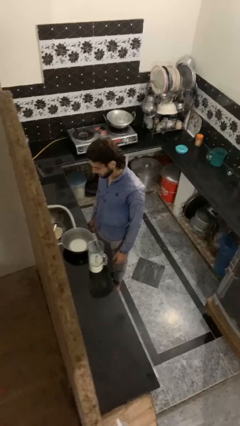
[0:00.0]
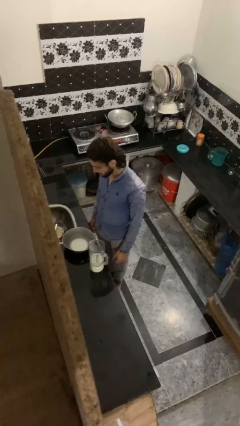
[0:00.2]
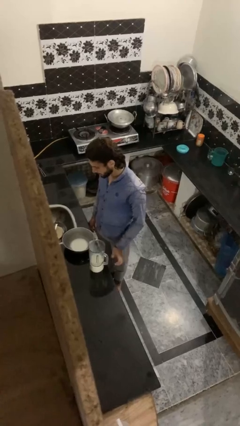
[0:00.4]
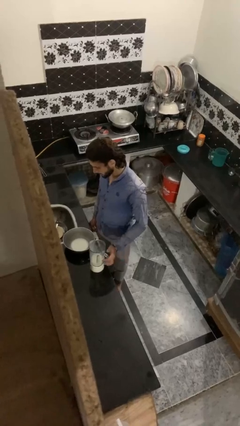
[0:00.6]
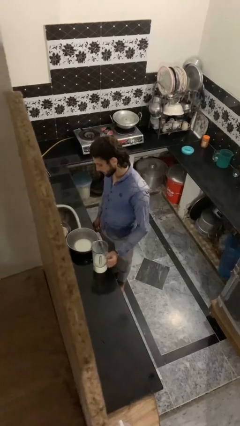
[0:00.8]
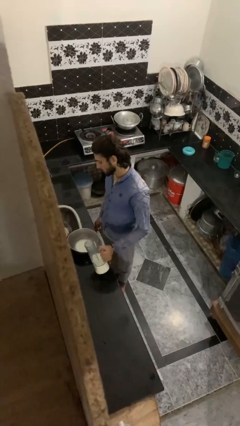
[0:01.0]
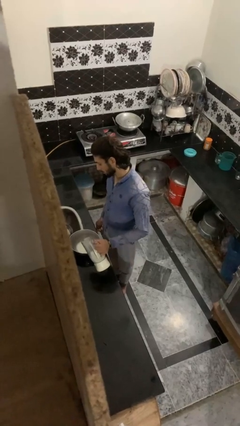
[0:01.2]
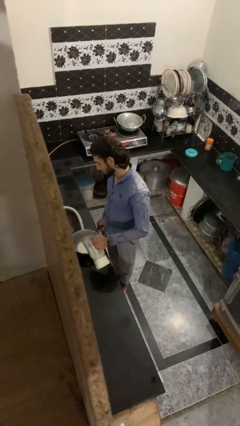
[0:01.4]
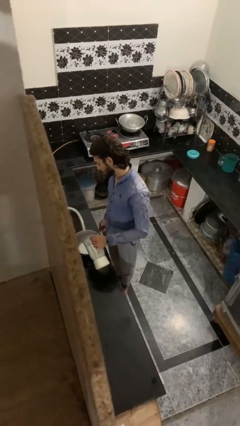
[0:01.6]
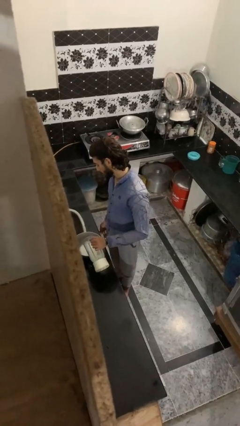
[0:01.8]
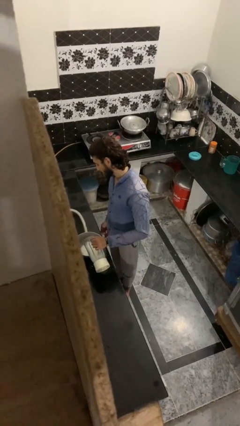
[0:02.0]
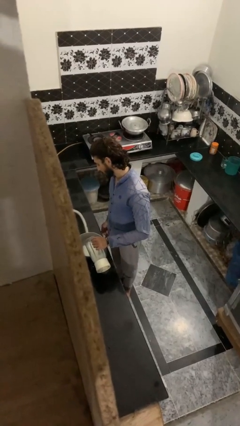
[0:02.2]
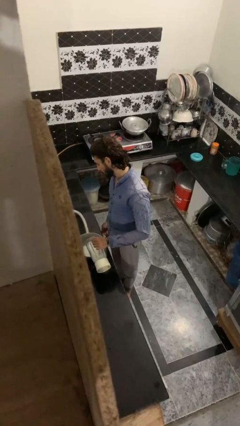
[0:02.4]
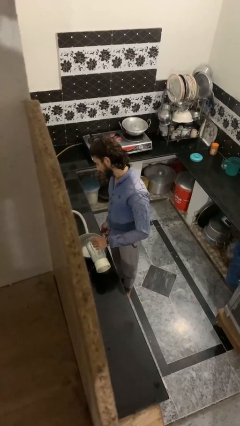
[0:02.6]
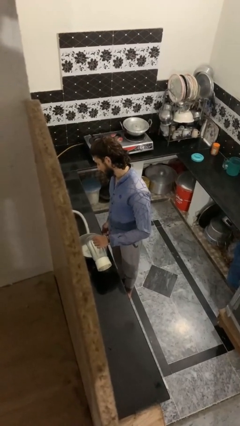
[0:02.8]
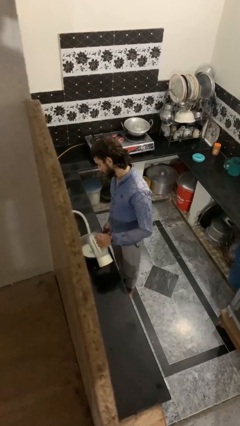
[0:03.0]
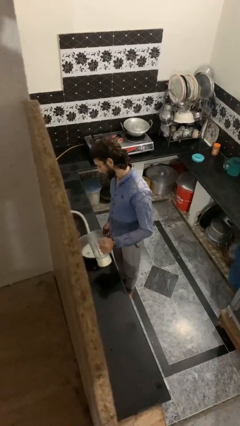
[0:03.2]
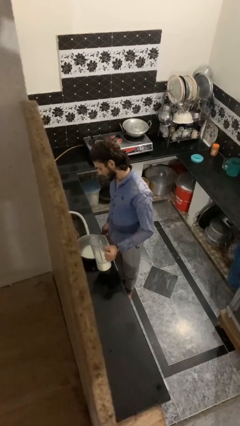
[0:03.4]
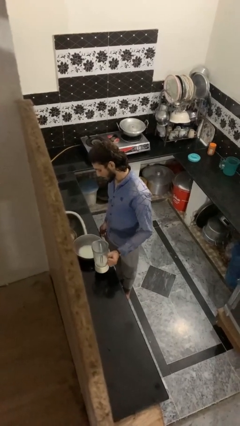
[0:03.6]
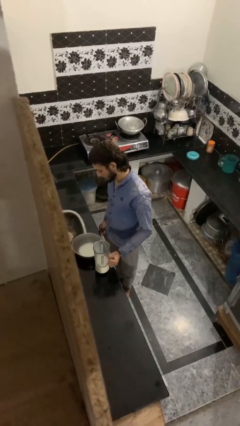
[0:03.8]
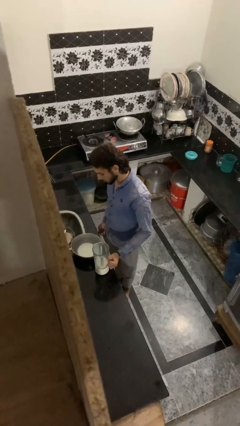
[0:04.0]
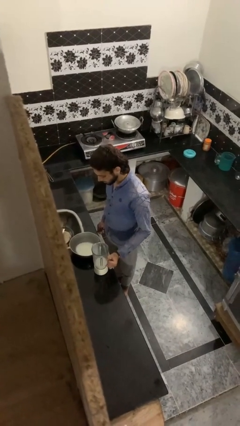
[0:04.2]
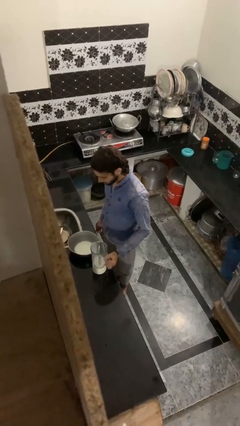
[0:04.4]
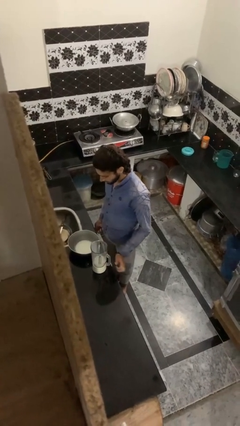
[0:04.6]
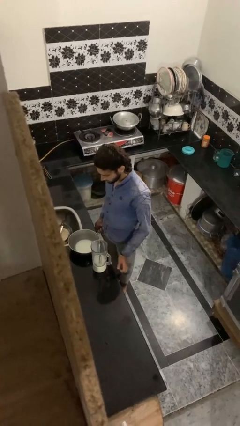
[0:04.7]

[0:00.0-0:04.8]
person pours into bowl

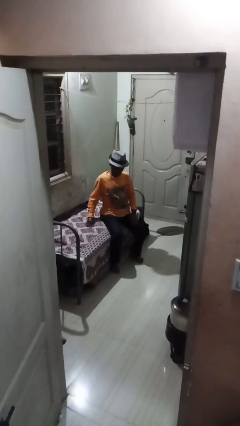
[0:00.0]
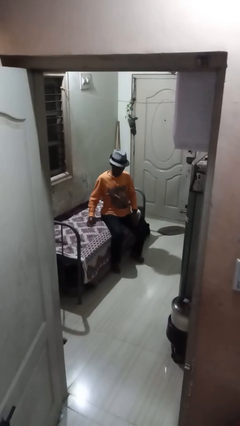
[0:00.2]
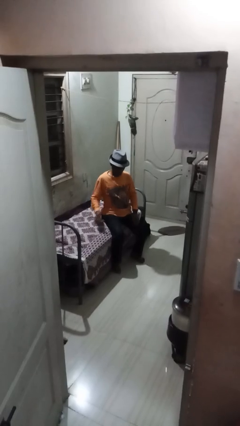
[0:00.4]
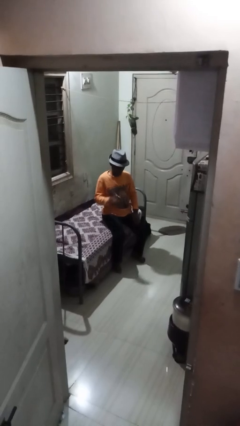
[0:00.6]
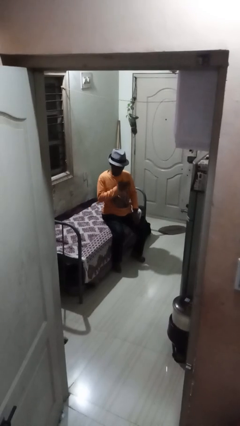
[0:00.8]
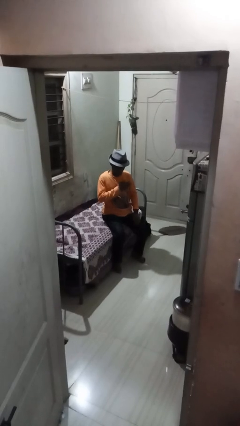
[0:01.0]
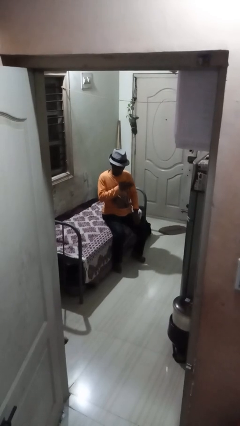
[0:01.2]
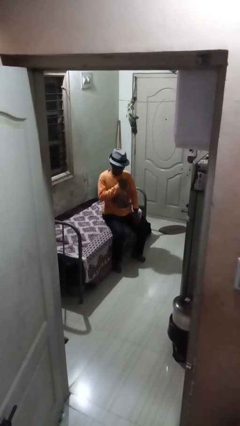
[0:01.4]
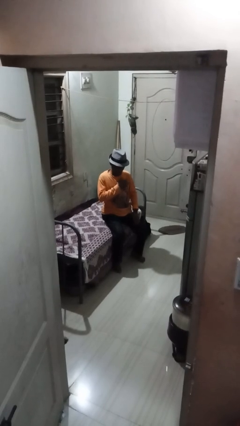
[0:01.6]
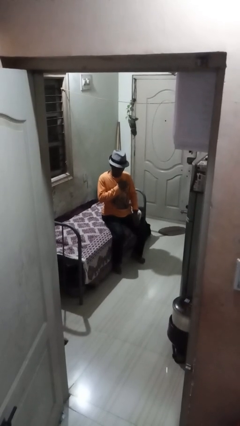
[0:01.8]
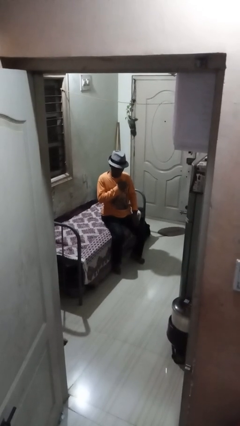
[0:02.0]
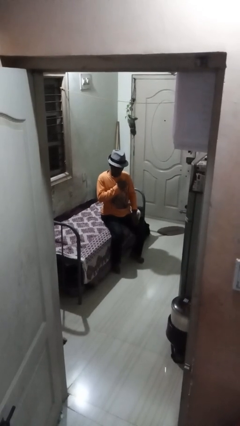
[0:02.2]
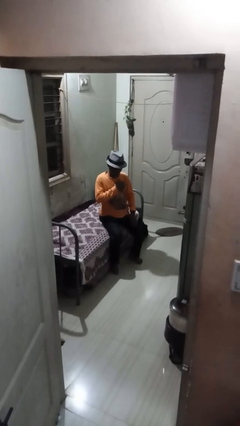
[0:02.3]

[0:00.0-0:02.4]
person drums on chest

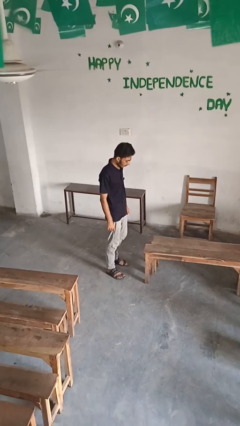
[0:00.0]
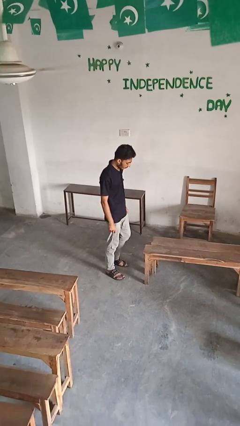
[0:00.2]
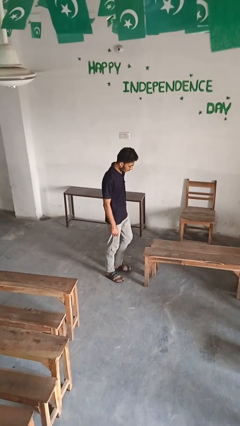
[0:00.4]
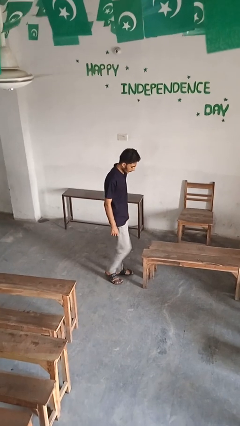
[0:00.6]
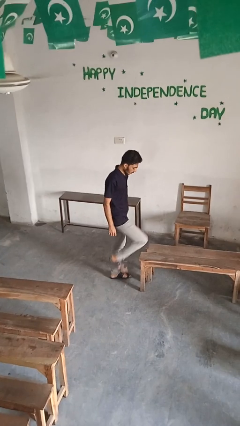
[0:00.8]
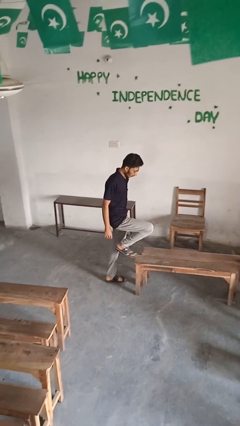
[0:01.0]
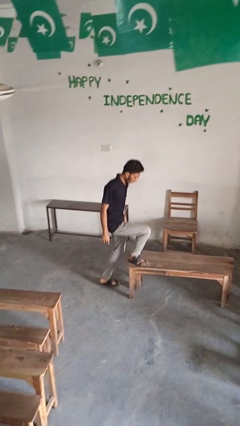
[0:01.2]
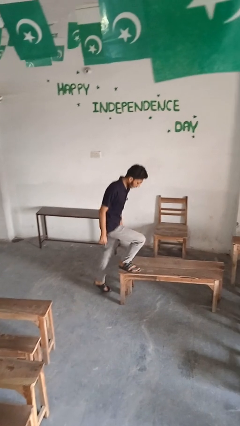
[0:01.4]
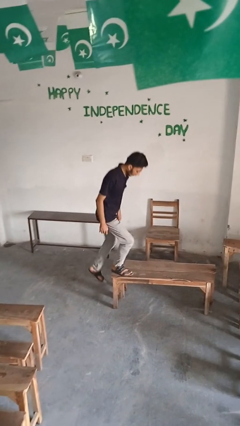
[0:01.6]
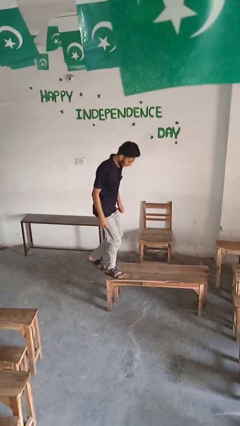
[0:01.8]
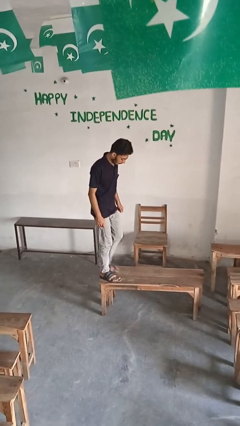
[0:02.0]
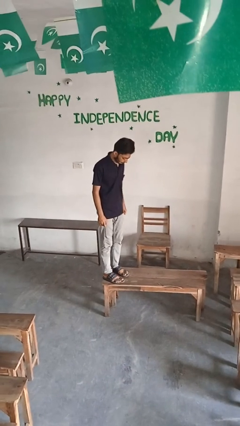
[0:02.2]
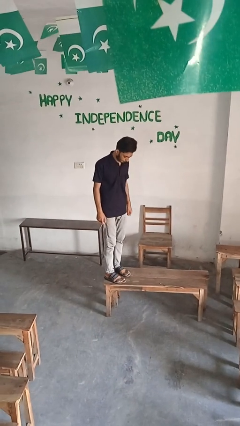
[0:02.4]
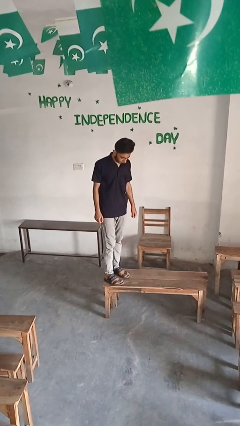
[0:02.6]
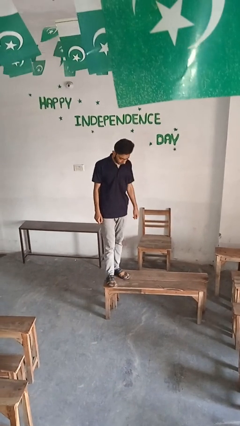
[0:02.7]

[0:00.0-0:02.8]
person climbs on table

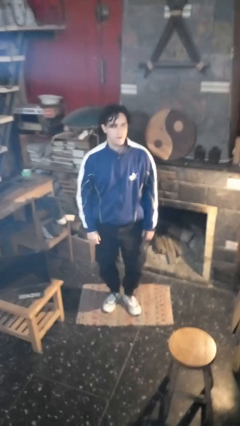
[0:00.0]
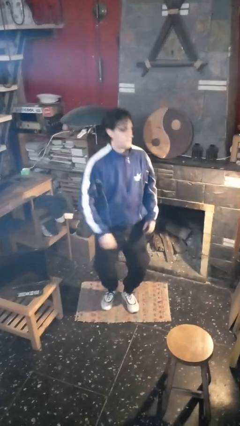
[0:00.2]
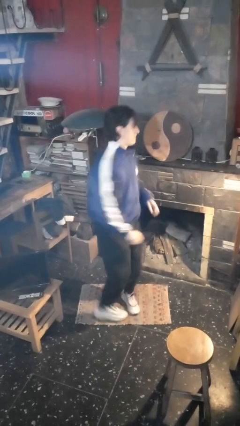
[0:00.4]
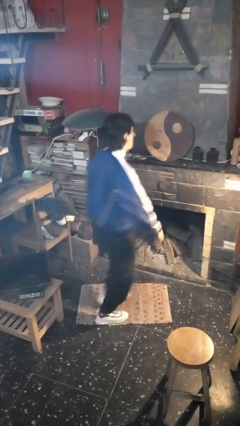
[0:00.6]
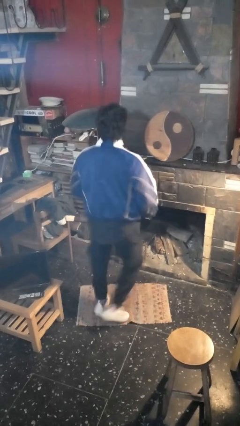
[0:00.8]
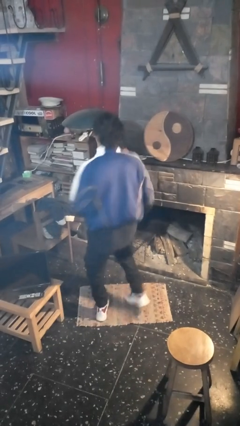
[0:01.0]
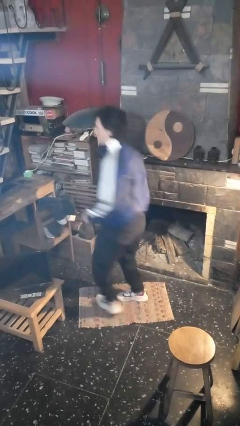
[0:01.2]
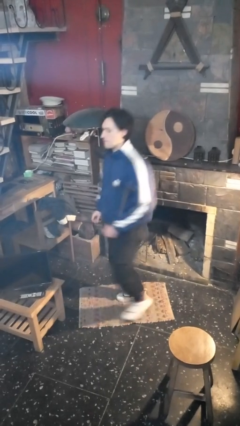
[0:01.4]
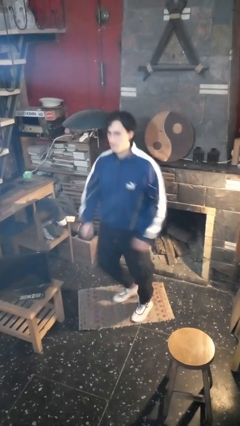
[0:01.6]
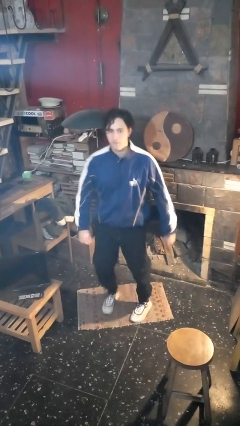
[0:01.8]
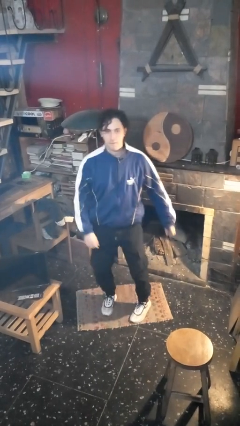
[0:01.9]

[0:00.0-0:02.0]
person twirls

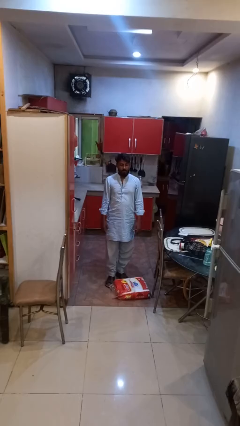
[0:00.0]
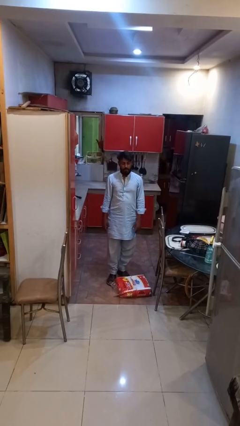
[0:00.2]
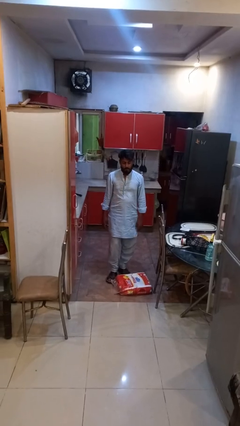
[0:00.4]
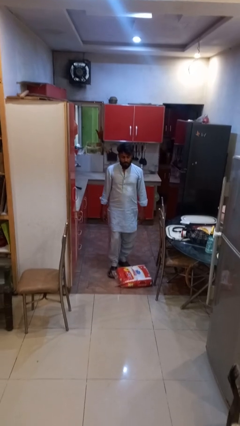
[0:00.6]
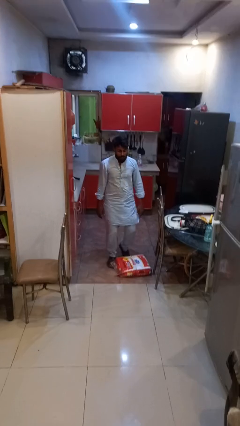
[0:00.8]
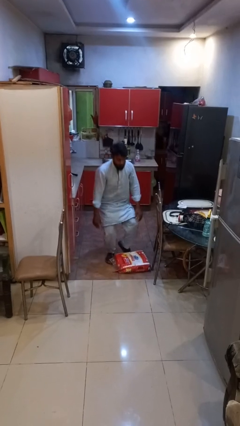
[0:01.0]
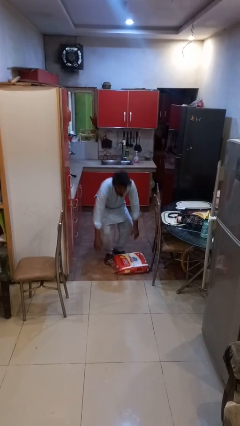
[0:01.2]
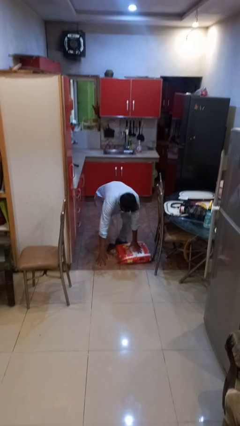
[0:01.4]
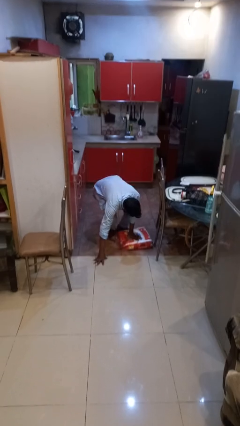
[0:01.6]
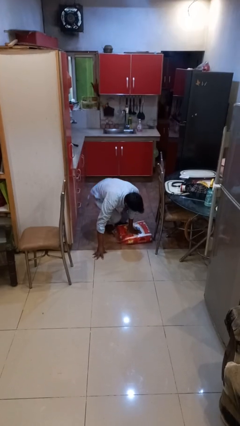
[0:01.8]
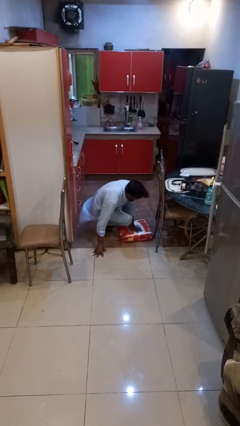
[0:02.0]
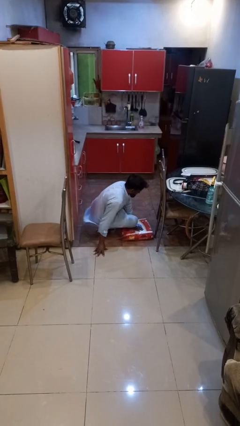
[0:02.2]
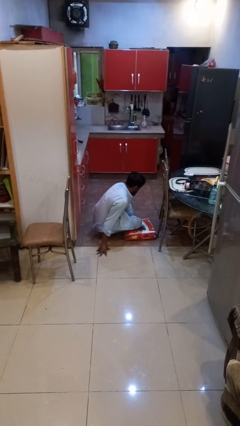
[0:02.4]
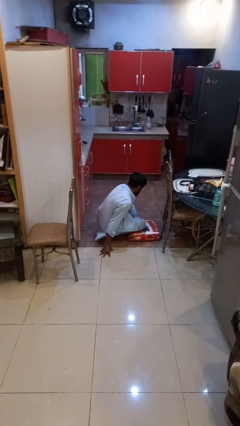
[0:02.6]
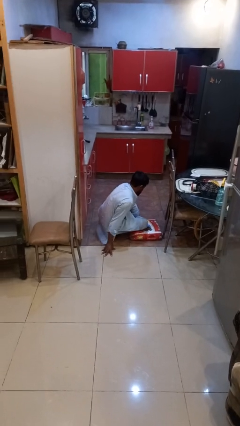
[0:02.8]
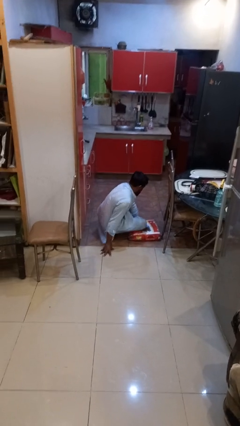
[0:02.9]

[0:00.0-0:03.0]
person trips on object on floor

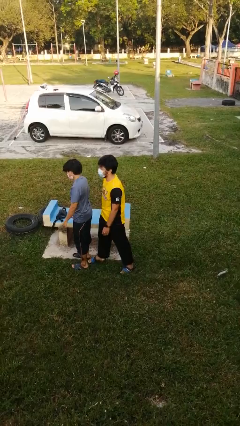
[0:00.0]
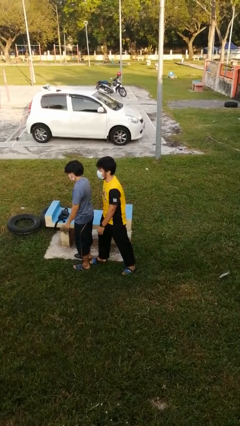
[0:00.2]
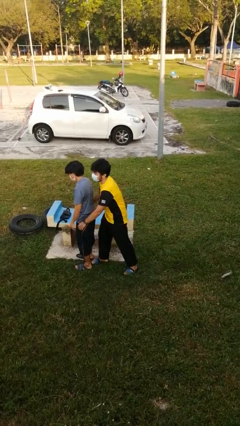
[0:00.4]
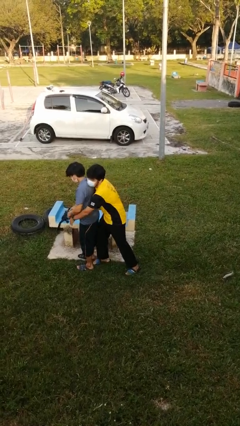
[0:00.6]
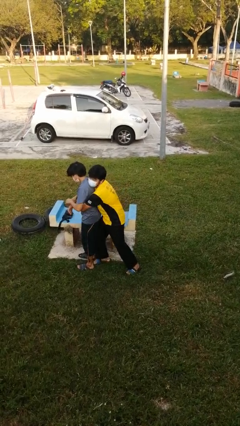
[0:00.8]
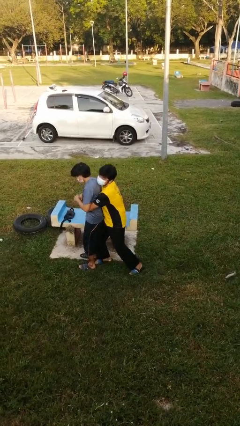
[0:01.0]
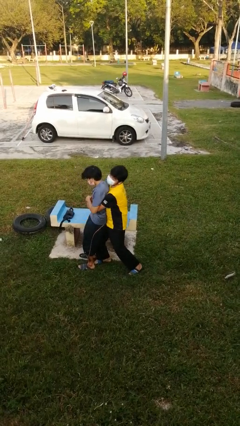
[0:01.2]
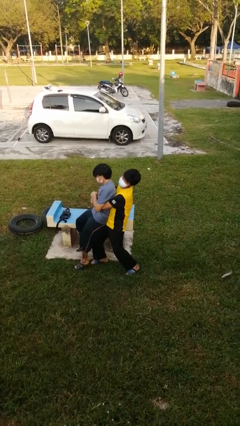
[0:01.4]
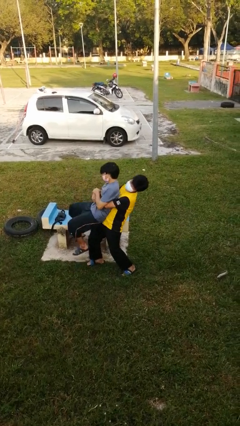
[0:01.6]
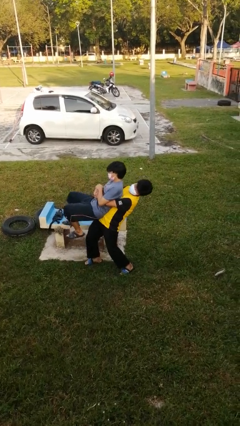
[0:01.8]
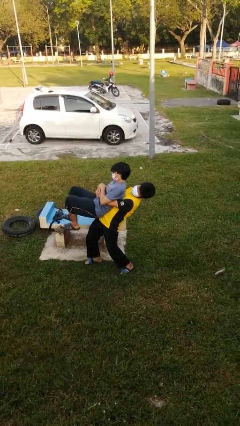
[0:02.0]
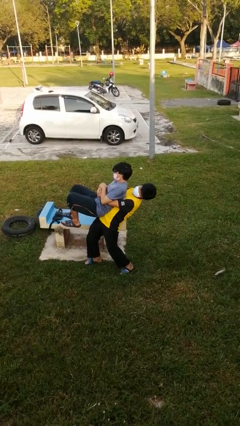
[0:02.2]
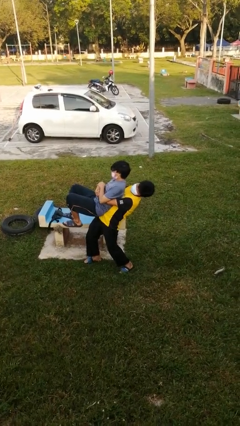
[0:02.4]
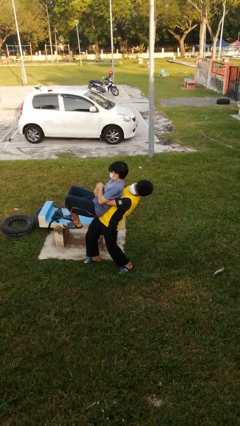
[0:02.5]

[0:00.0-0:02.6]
person picks up person
